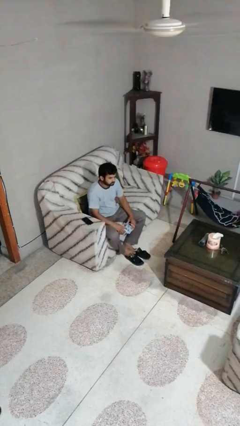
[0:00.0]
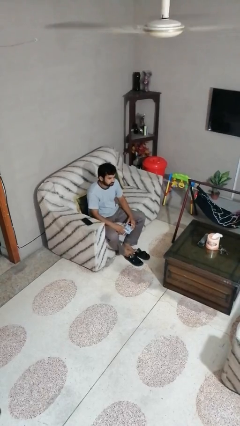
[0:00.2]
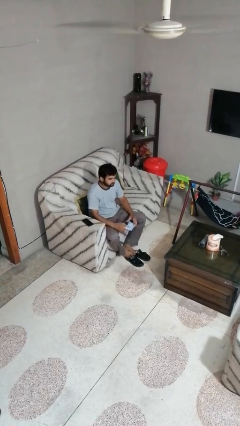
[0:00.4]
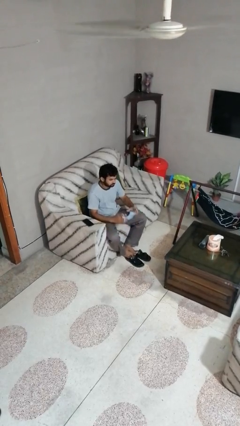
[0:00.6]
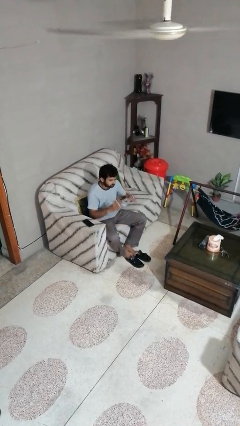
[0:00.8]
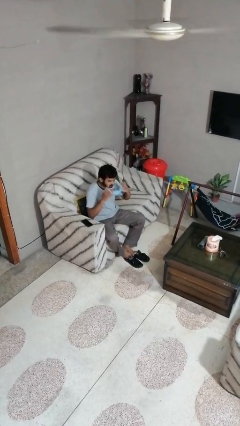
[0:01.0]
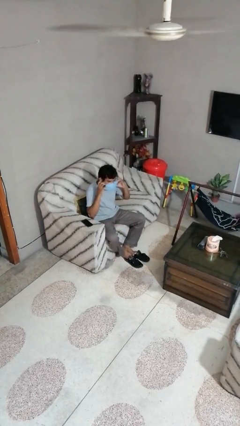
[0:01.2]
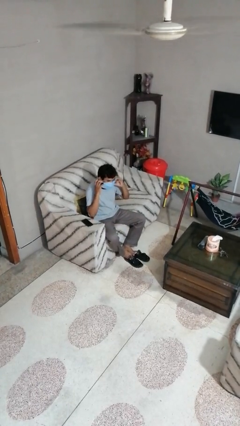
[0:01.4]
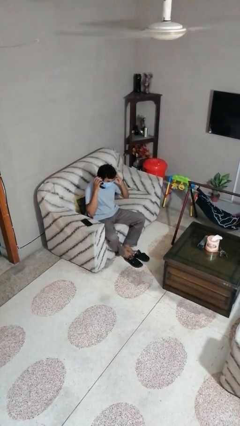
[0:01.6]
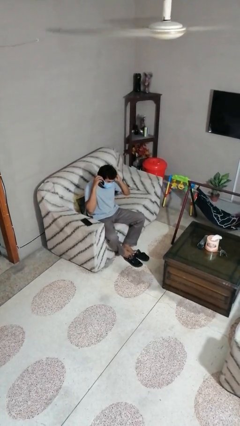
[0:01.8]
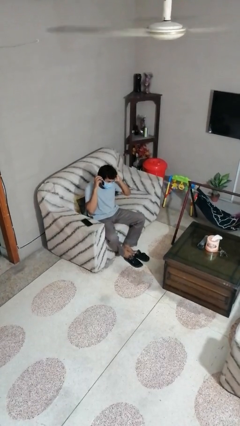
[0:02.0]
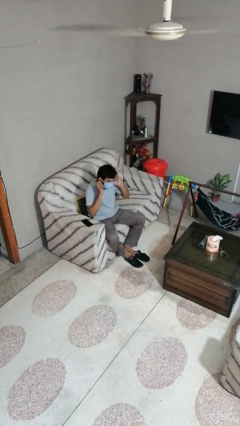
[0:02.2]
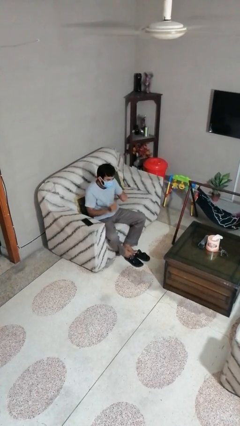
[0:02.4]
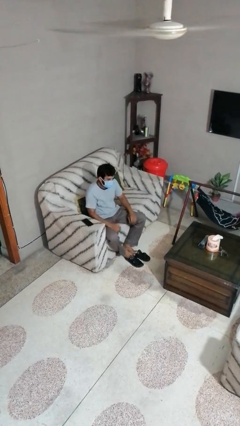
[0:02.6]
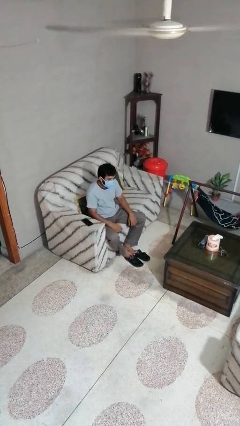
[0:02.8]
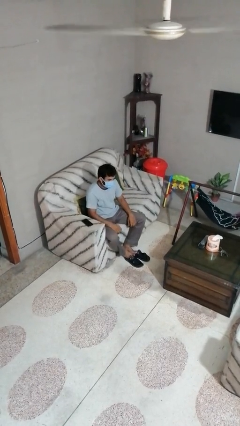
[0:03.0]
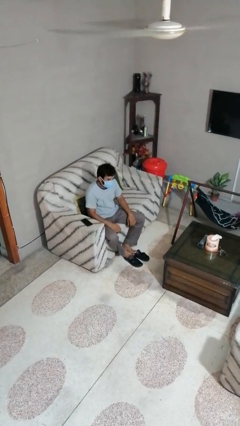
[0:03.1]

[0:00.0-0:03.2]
person puts on facemask

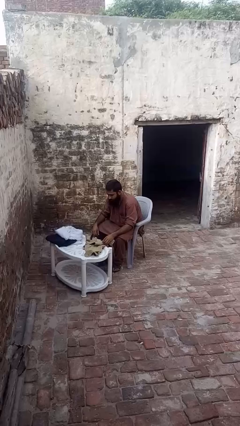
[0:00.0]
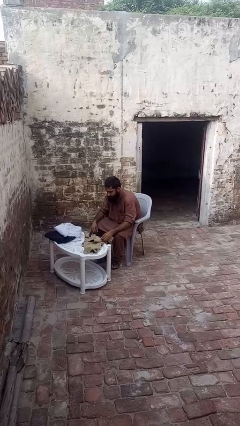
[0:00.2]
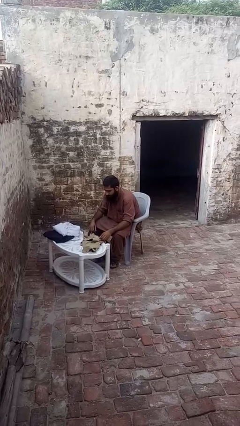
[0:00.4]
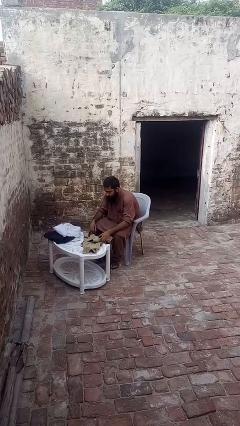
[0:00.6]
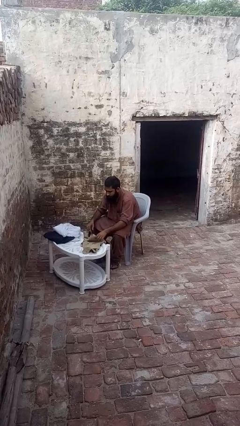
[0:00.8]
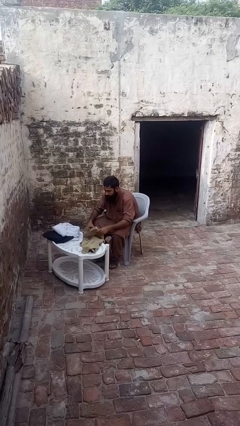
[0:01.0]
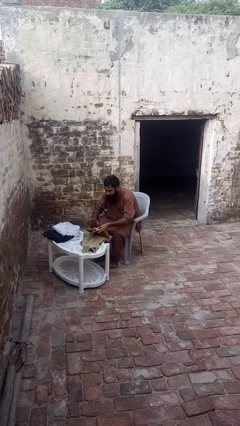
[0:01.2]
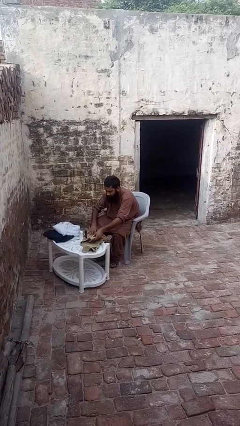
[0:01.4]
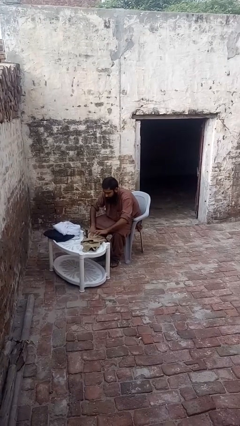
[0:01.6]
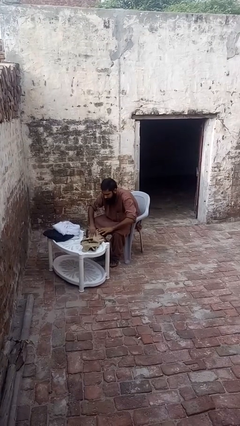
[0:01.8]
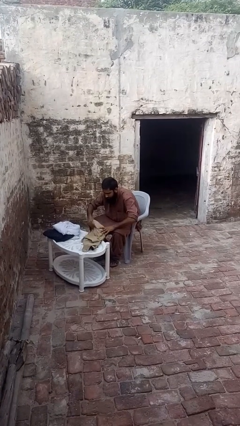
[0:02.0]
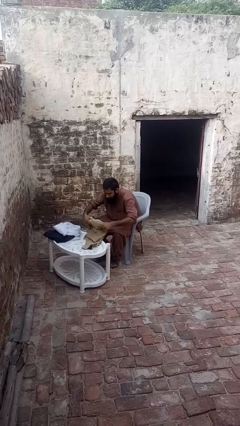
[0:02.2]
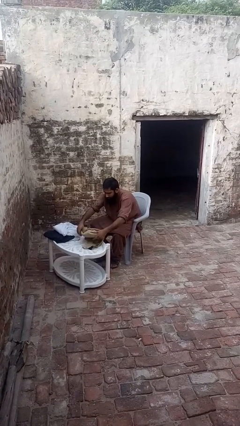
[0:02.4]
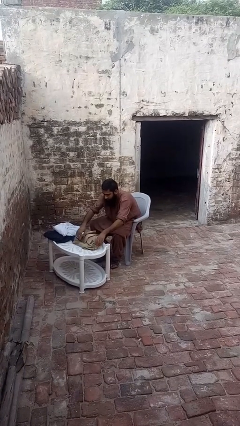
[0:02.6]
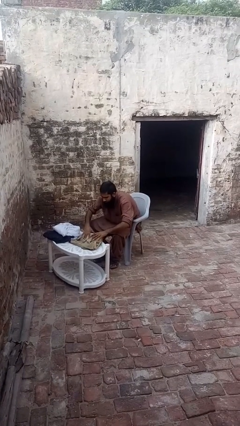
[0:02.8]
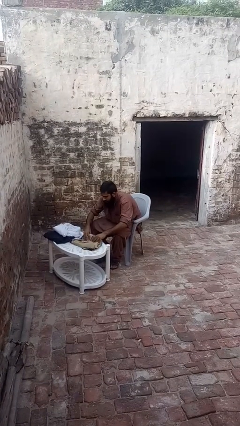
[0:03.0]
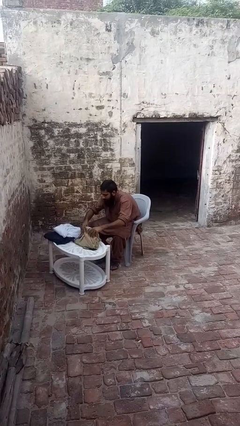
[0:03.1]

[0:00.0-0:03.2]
person folds shirt

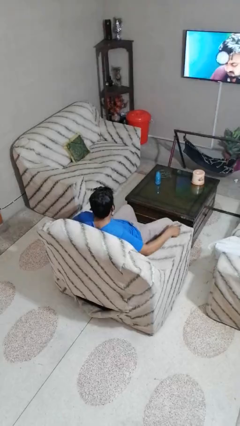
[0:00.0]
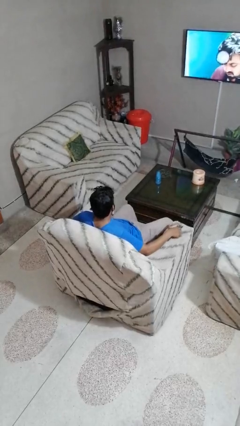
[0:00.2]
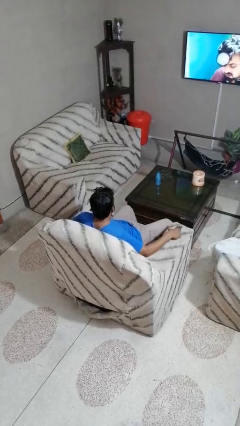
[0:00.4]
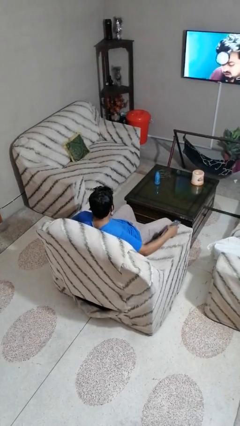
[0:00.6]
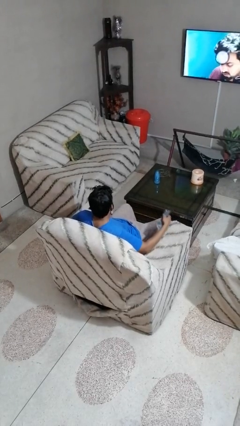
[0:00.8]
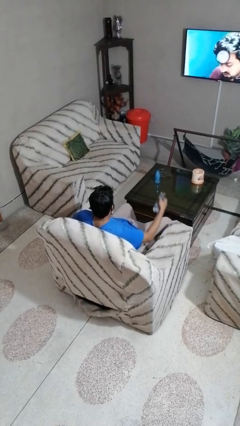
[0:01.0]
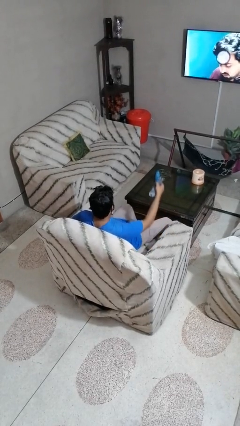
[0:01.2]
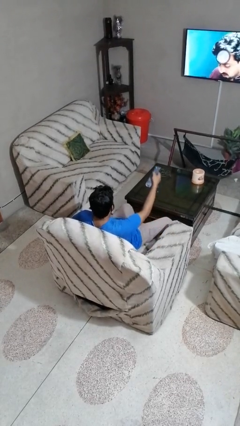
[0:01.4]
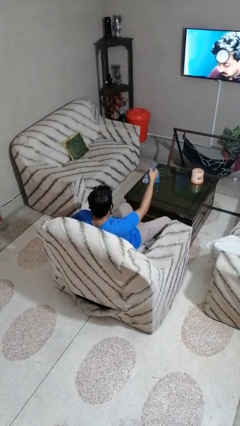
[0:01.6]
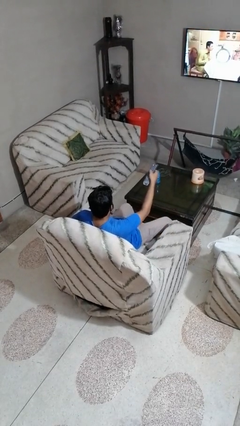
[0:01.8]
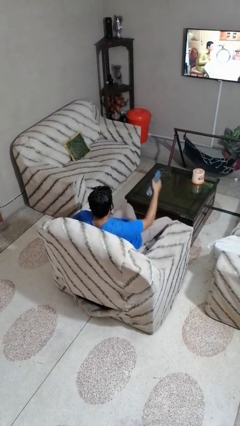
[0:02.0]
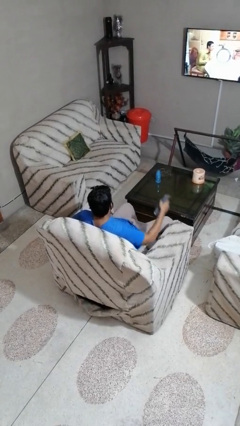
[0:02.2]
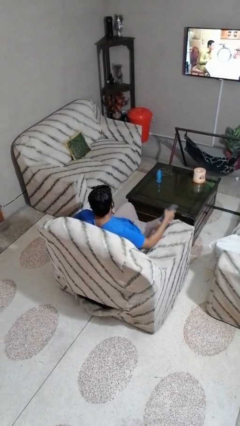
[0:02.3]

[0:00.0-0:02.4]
person uses television remote

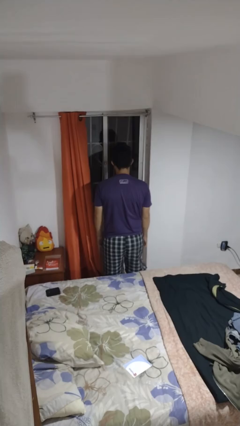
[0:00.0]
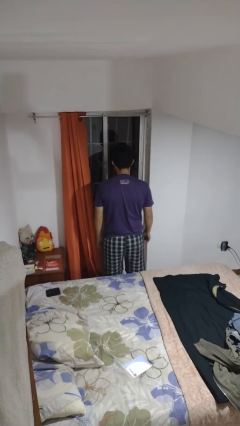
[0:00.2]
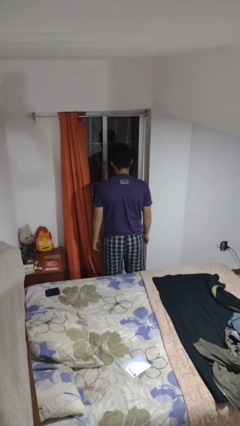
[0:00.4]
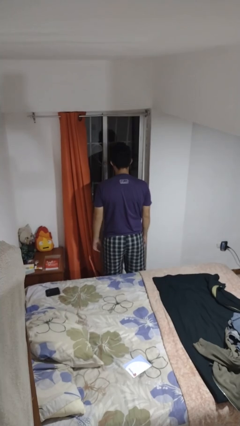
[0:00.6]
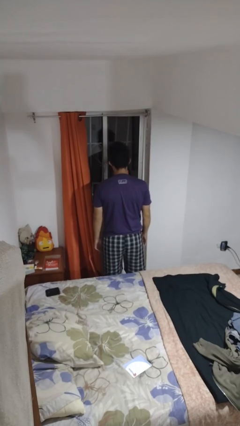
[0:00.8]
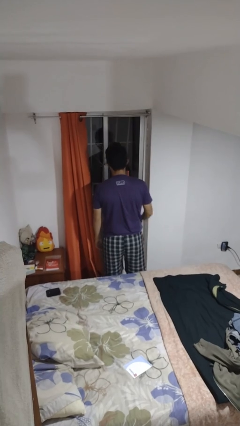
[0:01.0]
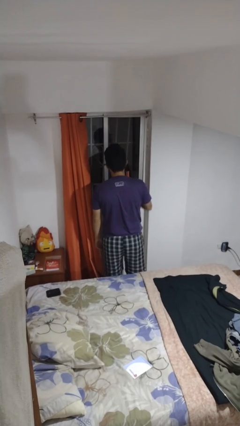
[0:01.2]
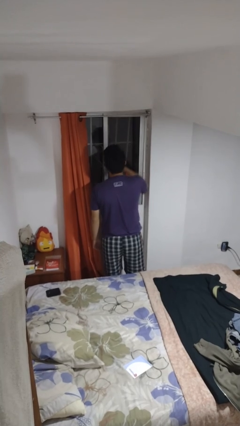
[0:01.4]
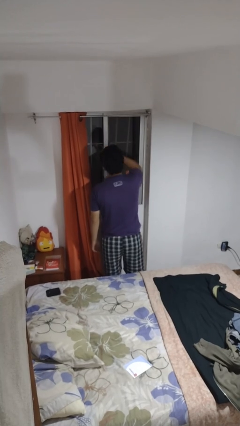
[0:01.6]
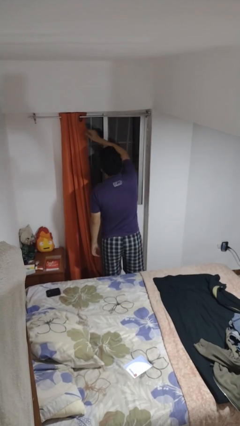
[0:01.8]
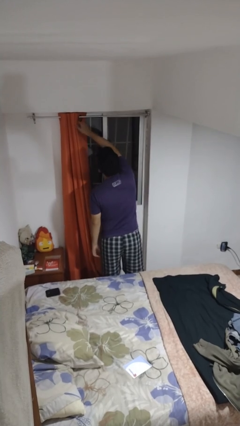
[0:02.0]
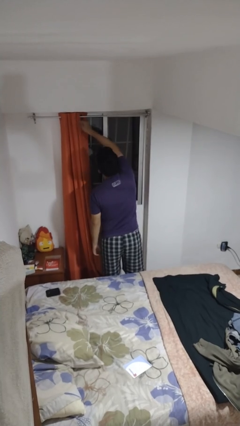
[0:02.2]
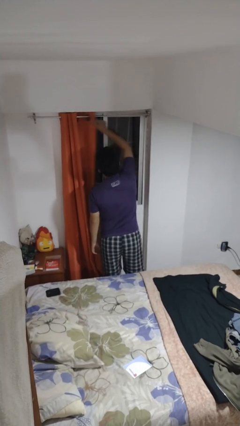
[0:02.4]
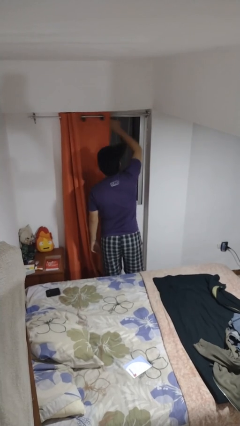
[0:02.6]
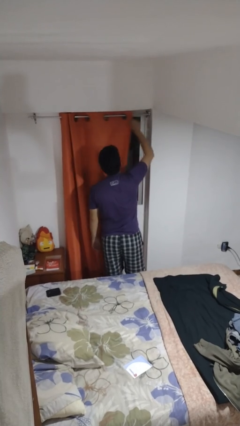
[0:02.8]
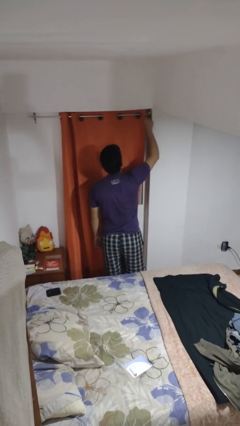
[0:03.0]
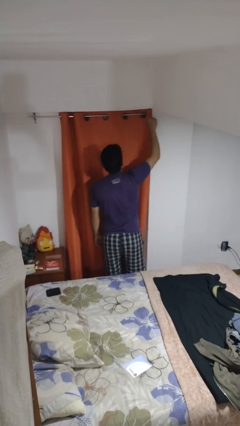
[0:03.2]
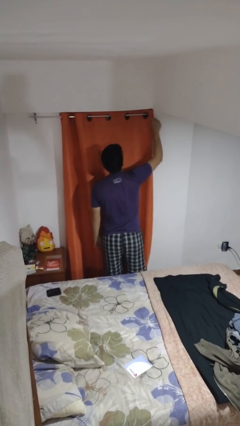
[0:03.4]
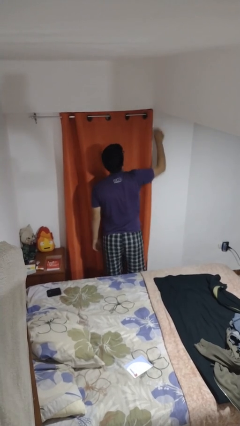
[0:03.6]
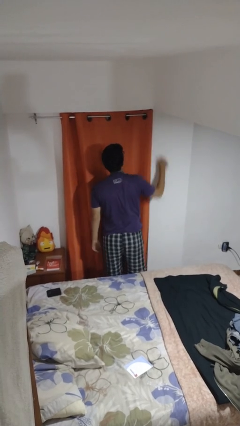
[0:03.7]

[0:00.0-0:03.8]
person closes curtains

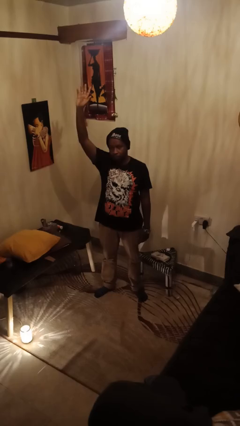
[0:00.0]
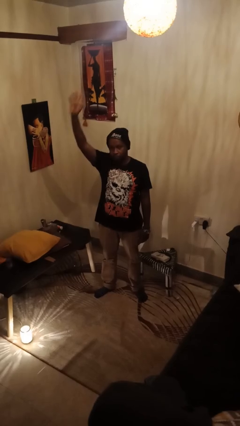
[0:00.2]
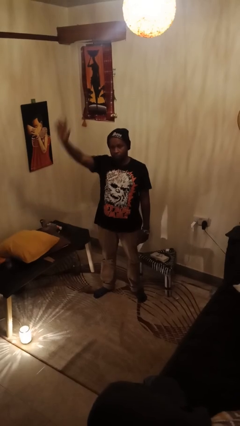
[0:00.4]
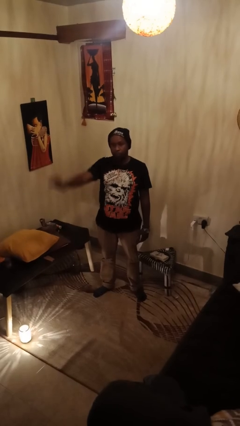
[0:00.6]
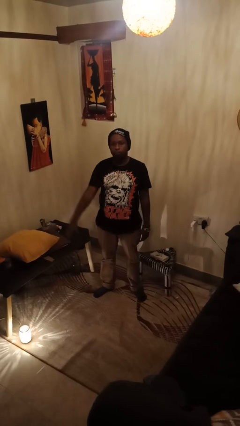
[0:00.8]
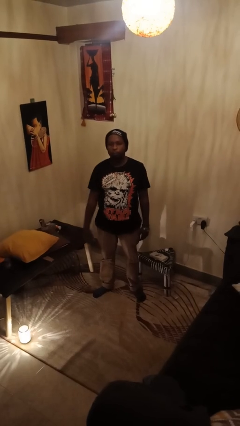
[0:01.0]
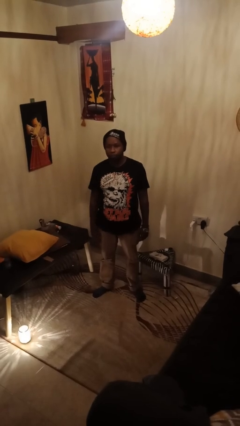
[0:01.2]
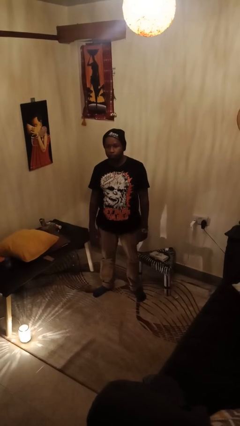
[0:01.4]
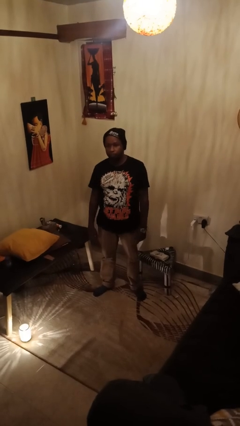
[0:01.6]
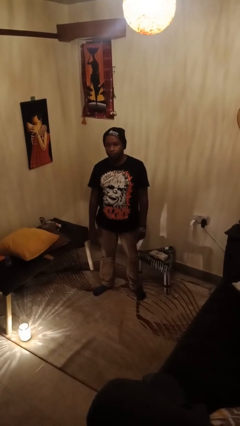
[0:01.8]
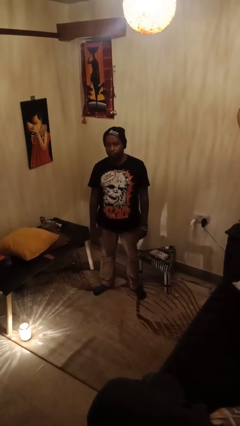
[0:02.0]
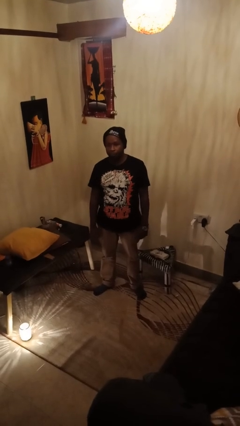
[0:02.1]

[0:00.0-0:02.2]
person gestures lower hand

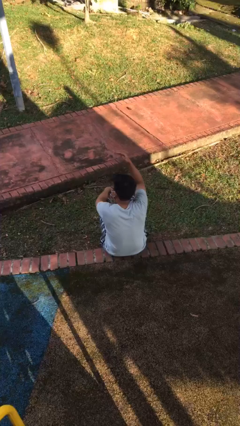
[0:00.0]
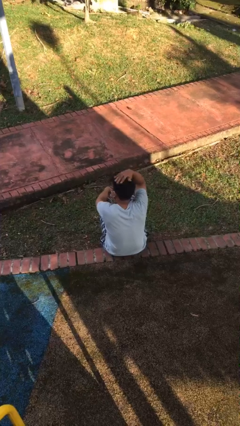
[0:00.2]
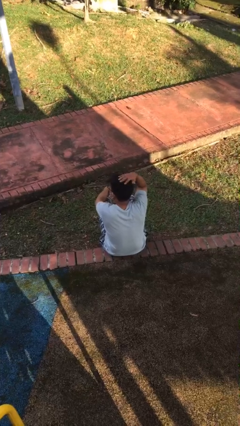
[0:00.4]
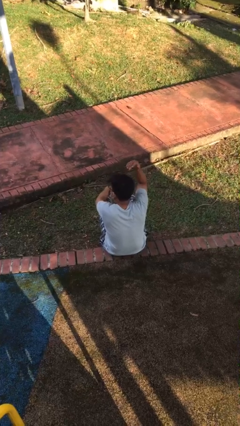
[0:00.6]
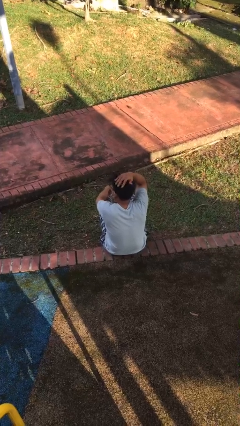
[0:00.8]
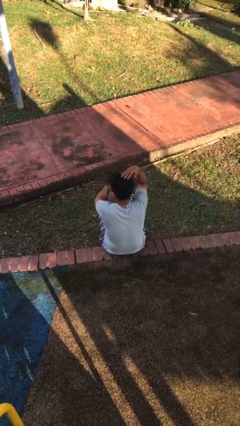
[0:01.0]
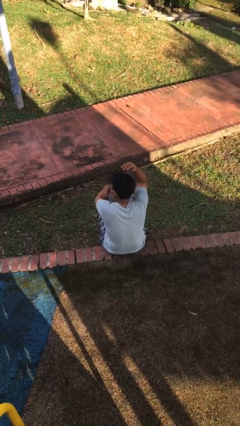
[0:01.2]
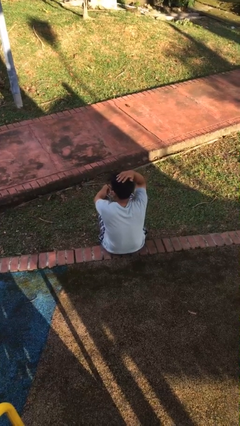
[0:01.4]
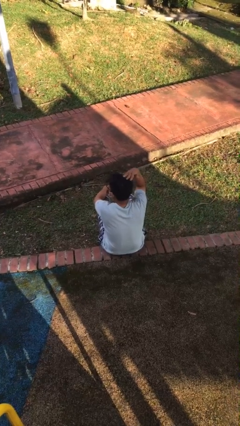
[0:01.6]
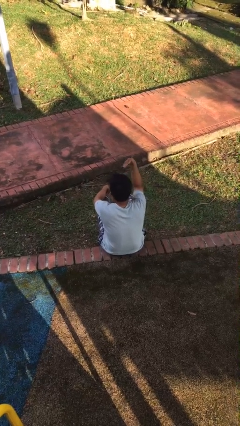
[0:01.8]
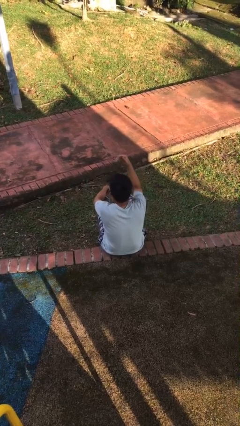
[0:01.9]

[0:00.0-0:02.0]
person pats head

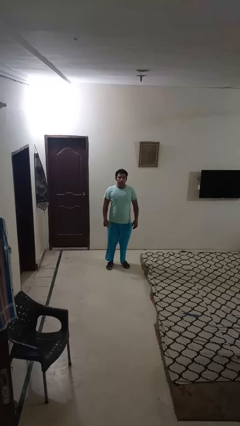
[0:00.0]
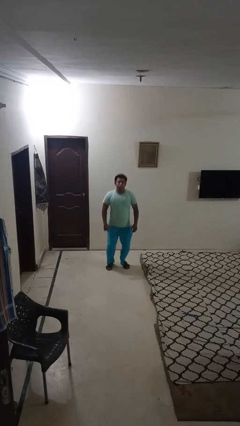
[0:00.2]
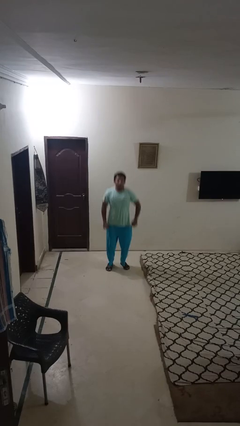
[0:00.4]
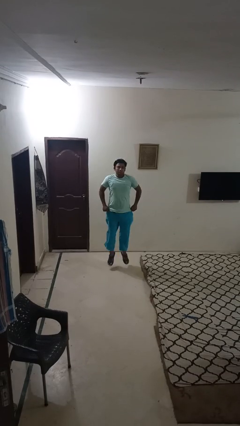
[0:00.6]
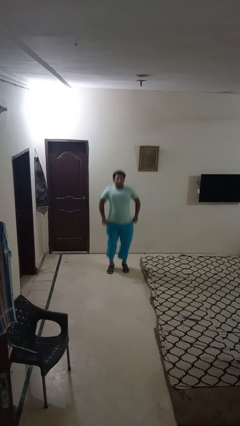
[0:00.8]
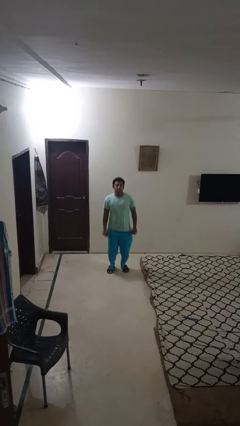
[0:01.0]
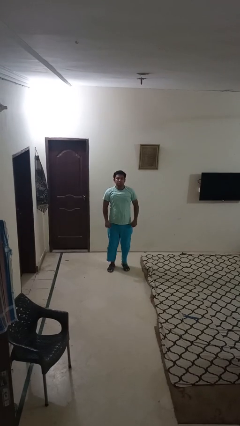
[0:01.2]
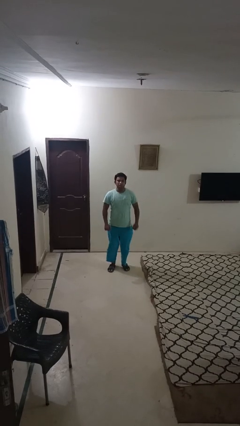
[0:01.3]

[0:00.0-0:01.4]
person jumps
